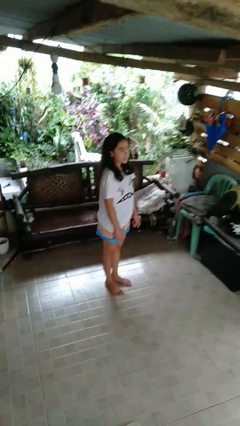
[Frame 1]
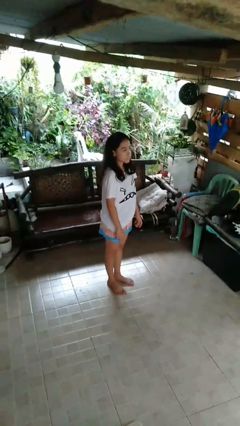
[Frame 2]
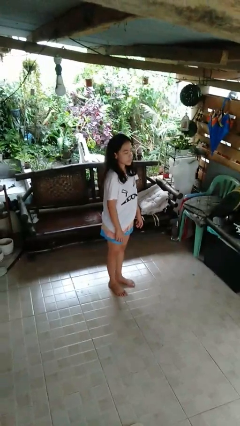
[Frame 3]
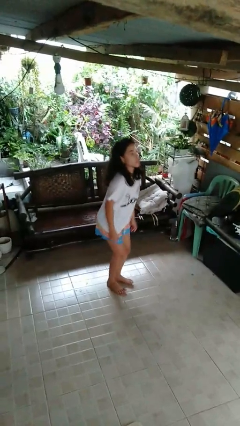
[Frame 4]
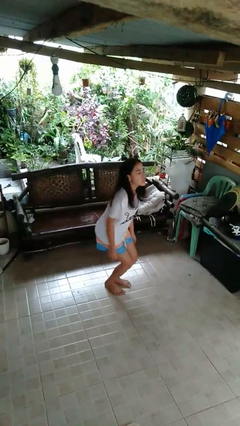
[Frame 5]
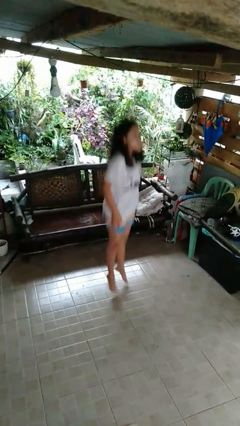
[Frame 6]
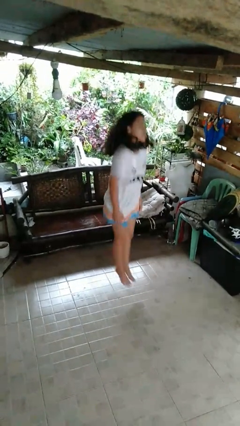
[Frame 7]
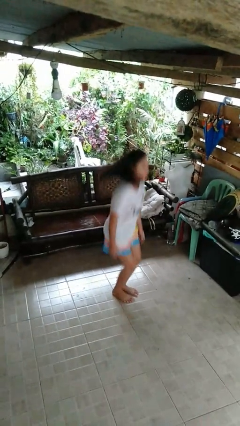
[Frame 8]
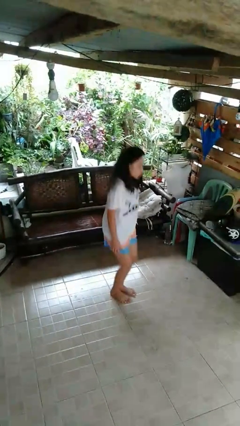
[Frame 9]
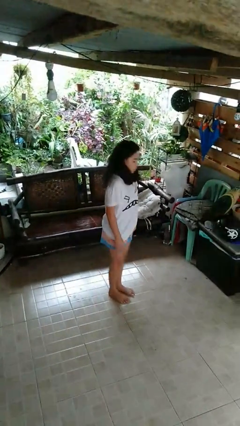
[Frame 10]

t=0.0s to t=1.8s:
person jumps

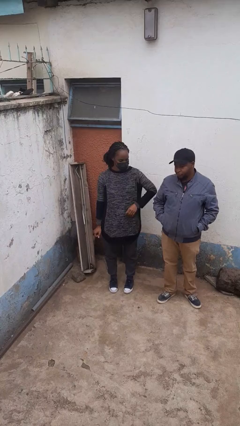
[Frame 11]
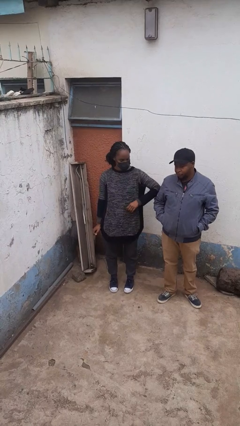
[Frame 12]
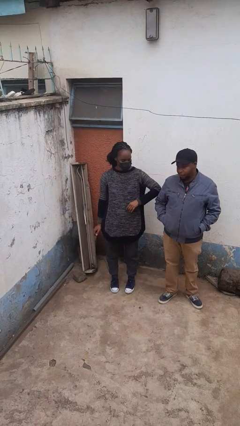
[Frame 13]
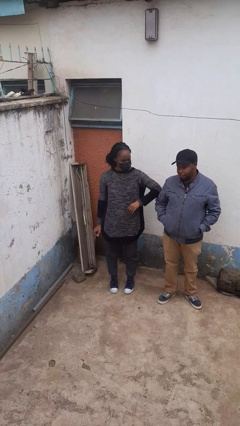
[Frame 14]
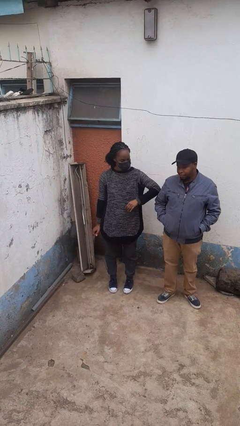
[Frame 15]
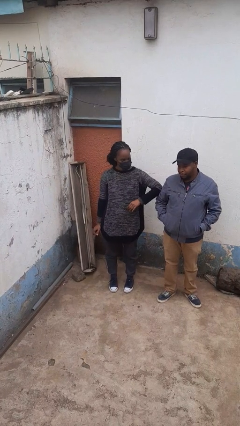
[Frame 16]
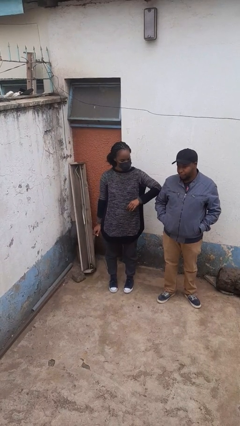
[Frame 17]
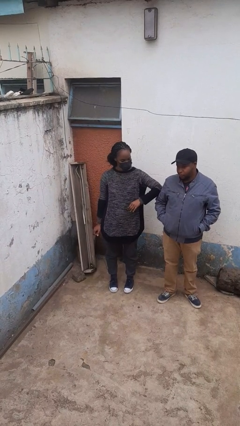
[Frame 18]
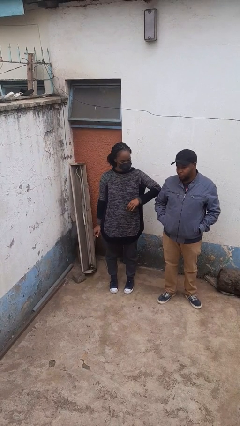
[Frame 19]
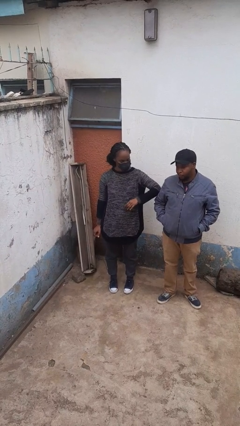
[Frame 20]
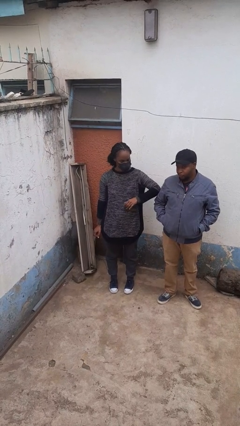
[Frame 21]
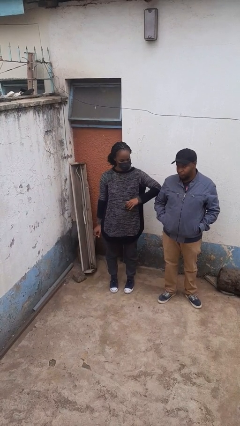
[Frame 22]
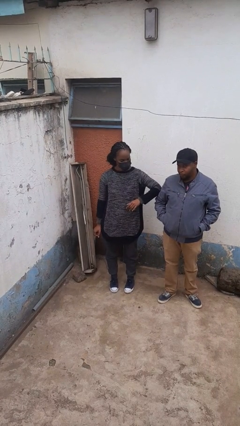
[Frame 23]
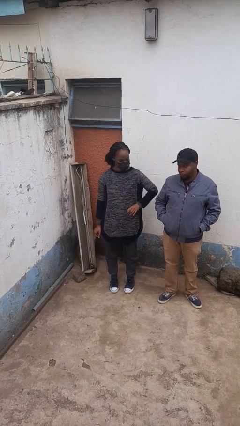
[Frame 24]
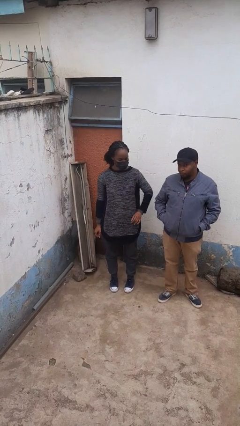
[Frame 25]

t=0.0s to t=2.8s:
person nudges person with elbow

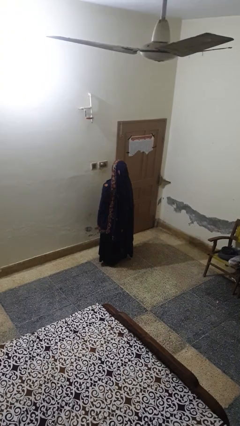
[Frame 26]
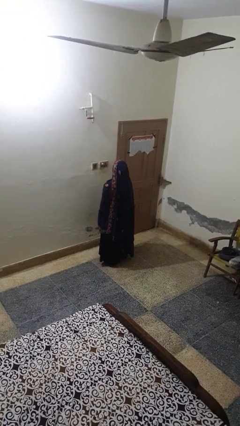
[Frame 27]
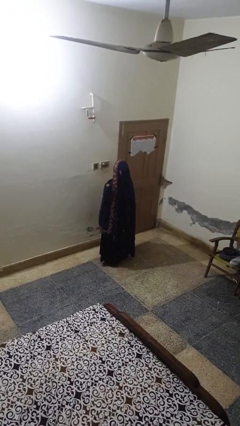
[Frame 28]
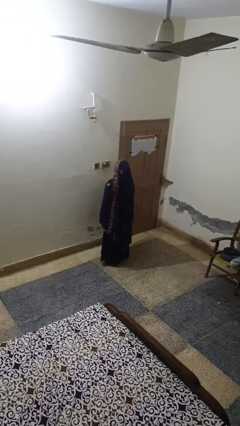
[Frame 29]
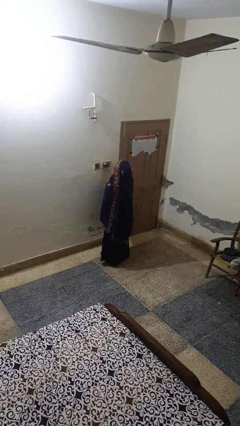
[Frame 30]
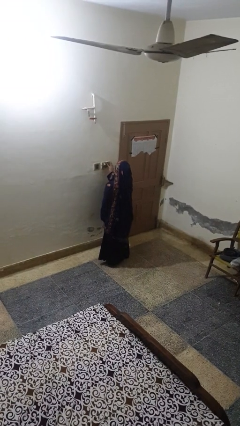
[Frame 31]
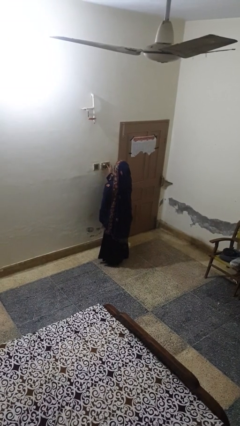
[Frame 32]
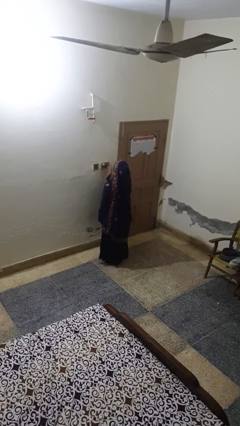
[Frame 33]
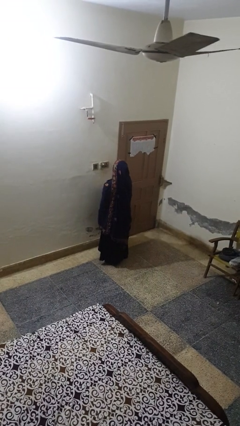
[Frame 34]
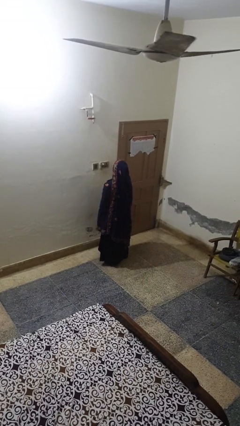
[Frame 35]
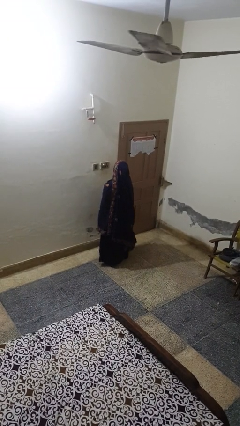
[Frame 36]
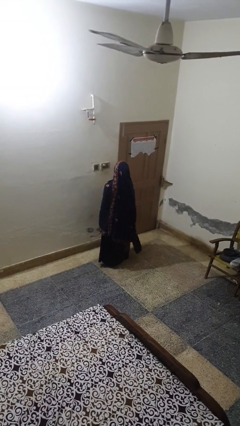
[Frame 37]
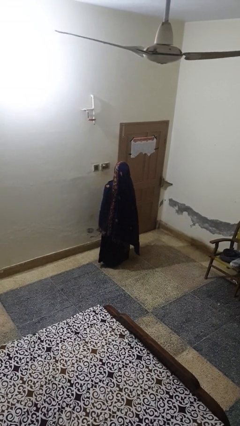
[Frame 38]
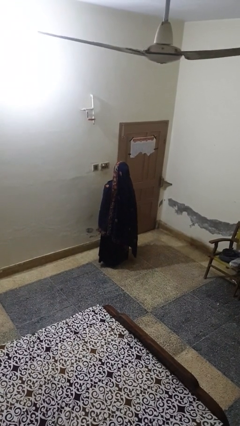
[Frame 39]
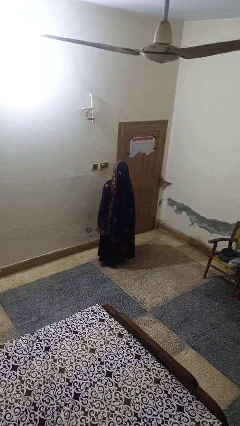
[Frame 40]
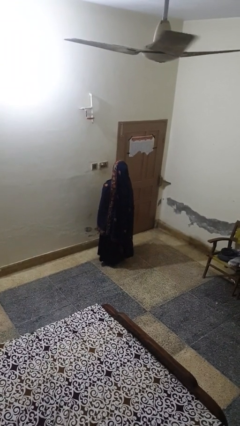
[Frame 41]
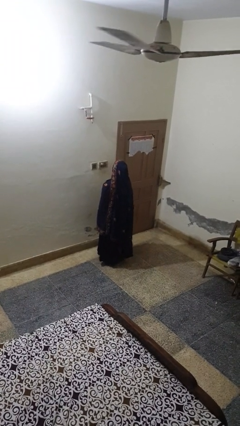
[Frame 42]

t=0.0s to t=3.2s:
person turns on fan

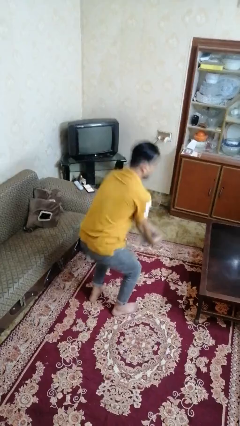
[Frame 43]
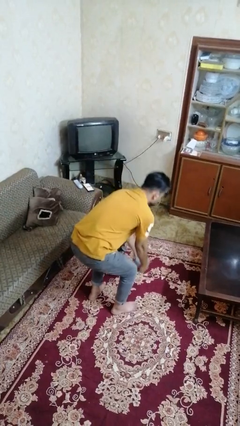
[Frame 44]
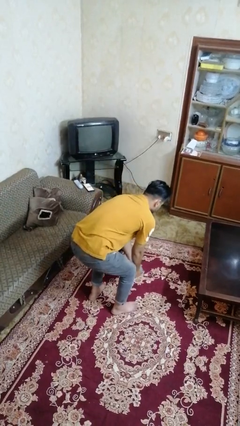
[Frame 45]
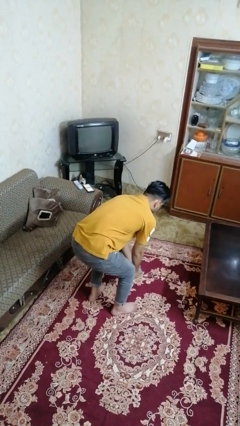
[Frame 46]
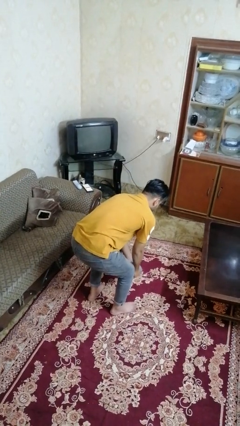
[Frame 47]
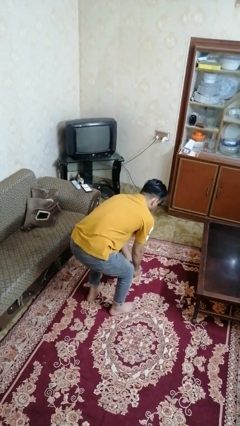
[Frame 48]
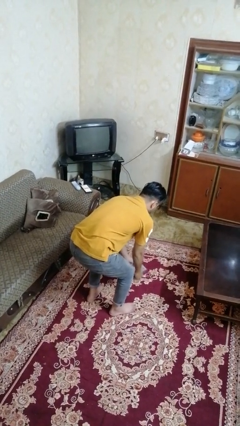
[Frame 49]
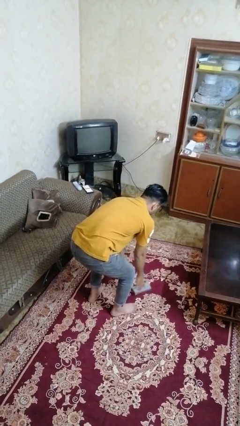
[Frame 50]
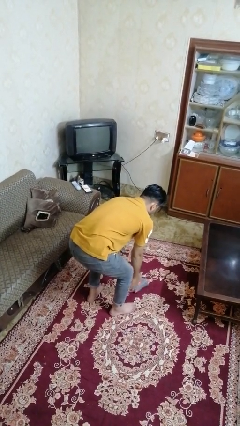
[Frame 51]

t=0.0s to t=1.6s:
person catches dropped object

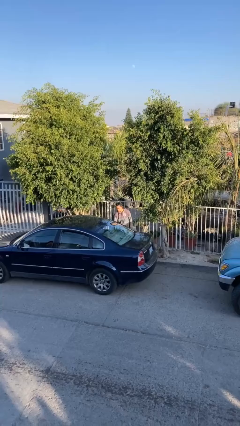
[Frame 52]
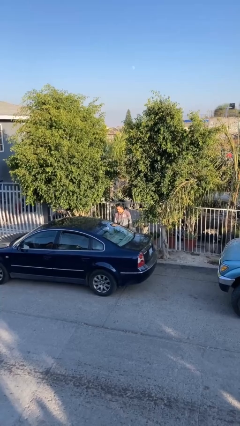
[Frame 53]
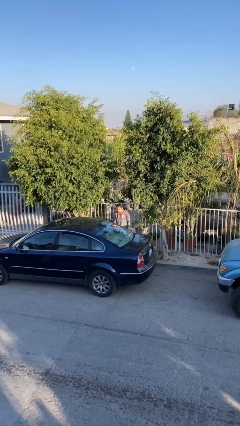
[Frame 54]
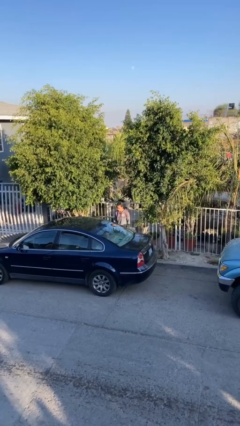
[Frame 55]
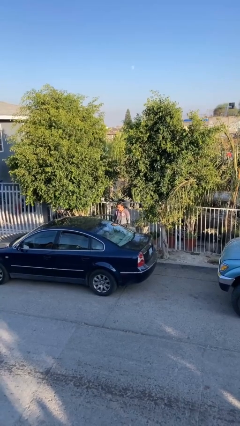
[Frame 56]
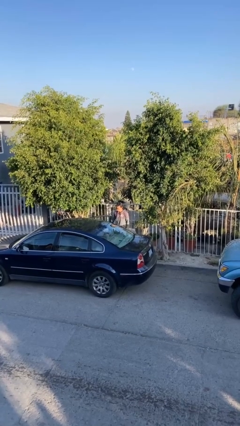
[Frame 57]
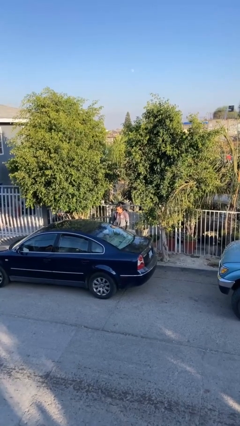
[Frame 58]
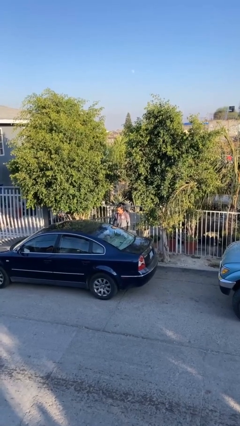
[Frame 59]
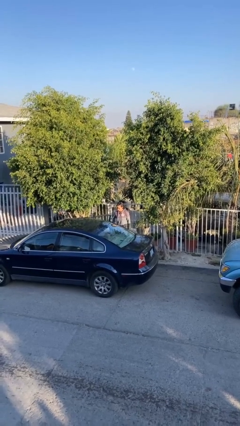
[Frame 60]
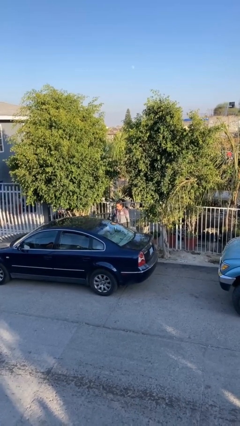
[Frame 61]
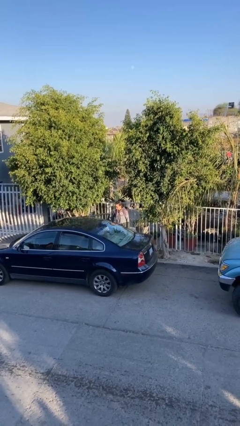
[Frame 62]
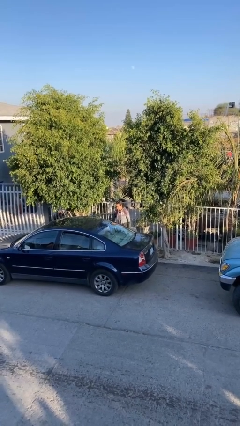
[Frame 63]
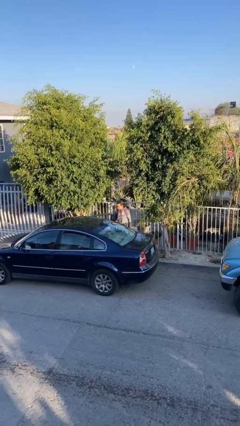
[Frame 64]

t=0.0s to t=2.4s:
person opens car door

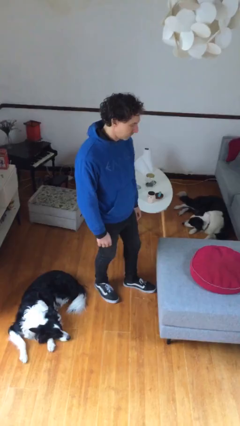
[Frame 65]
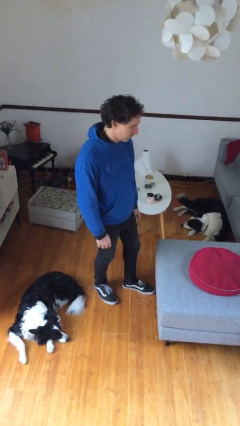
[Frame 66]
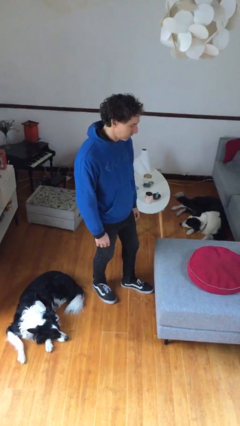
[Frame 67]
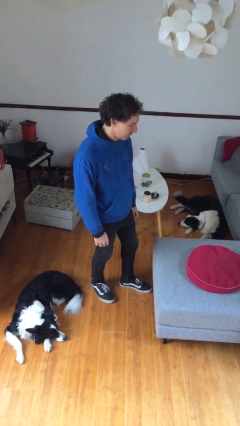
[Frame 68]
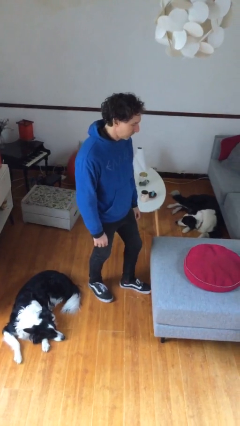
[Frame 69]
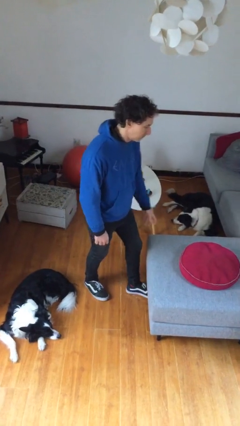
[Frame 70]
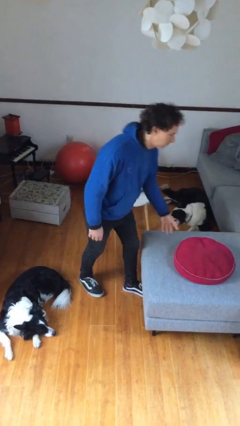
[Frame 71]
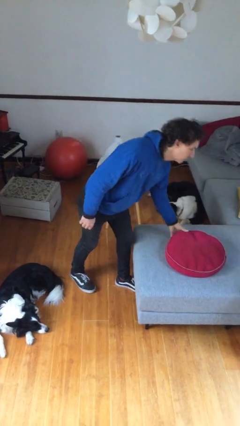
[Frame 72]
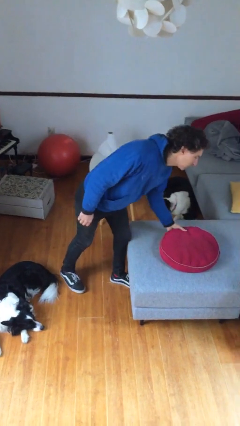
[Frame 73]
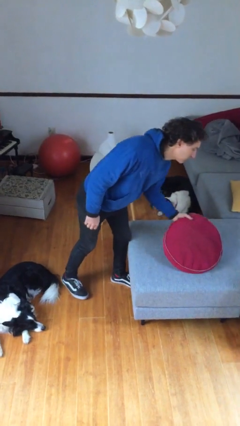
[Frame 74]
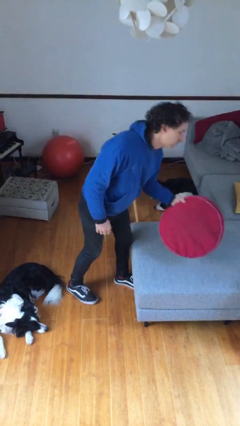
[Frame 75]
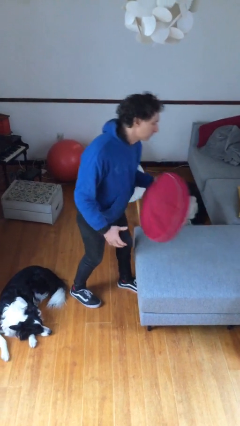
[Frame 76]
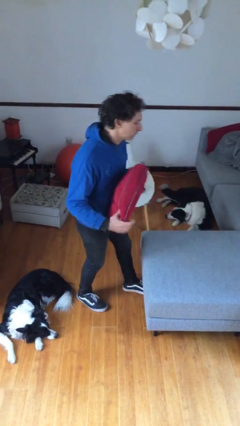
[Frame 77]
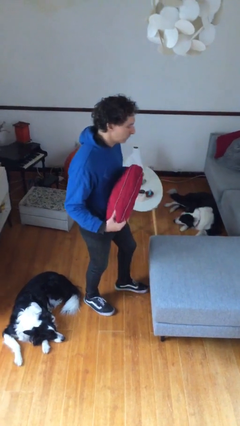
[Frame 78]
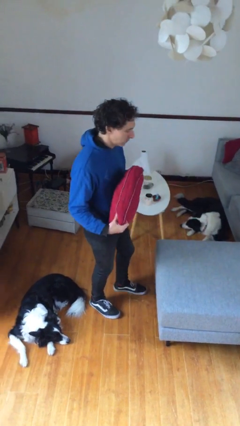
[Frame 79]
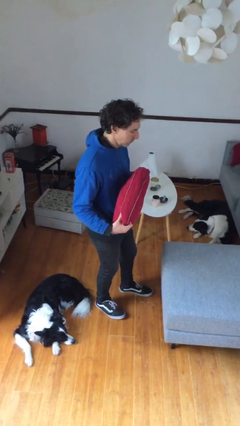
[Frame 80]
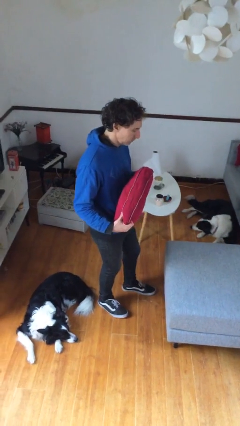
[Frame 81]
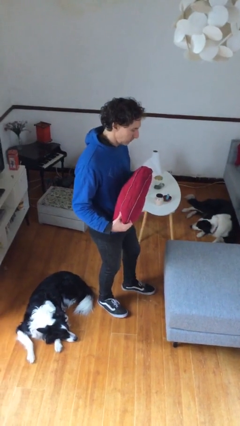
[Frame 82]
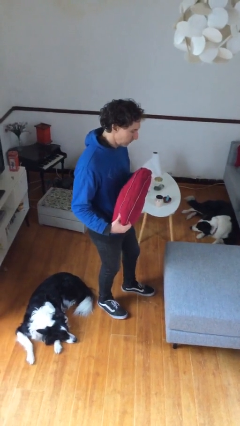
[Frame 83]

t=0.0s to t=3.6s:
person picks up object from couch

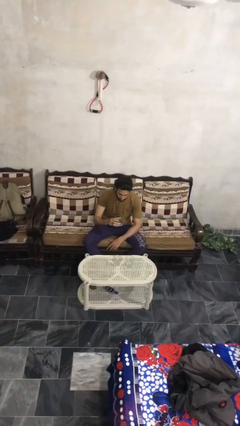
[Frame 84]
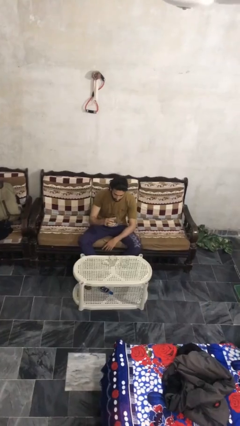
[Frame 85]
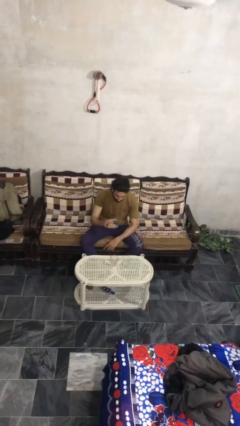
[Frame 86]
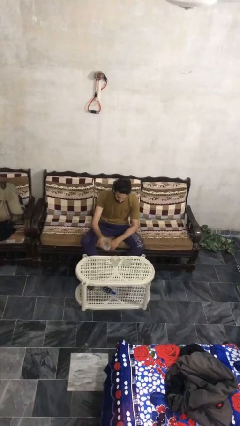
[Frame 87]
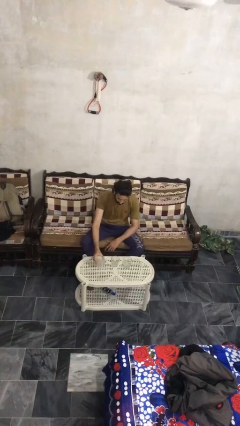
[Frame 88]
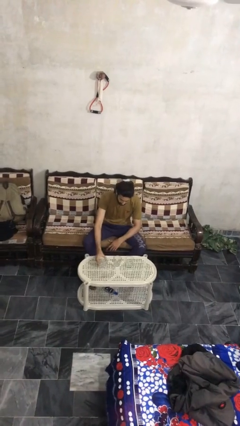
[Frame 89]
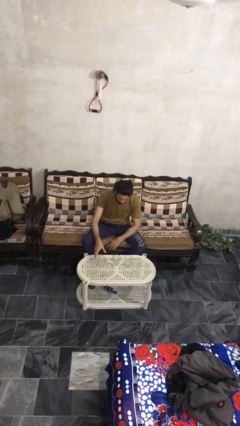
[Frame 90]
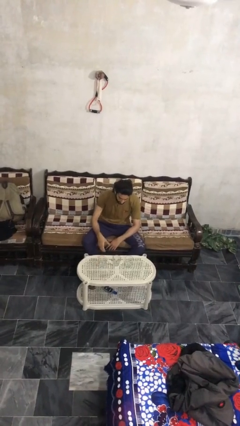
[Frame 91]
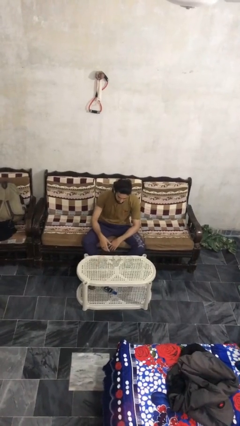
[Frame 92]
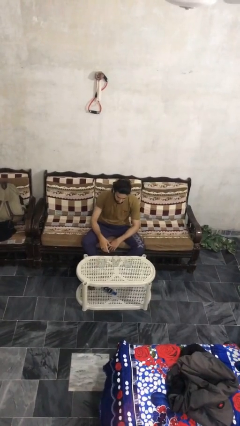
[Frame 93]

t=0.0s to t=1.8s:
person puts down object on table
